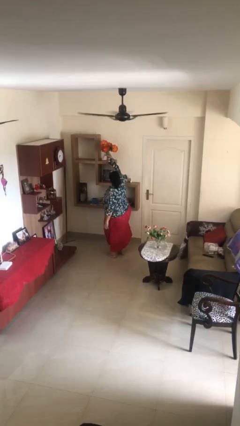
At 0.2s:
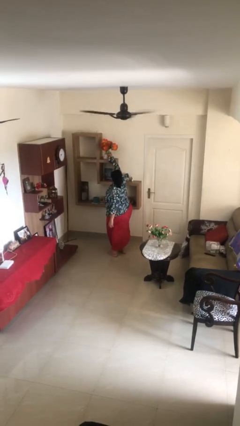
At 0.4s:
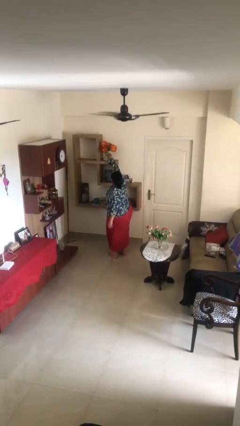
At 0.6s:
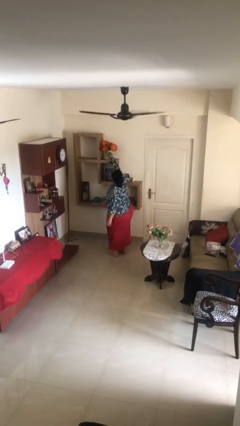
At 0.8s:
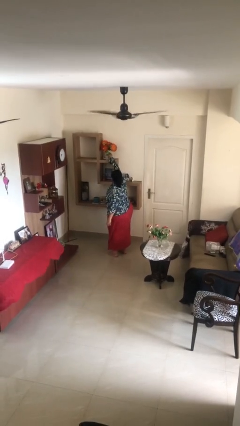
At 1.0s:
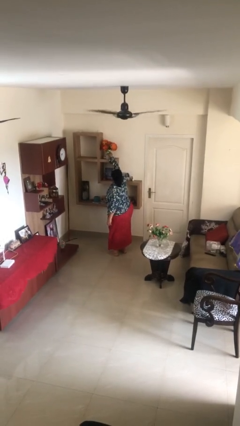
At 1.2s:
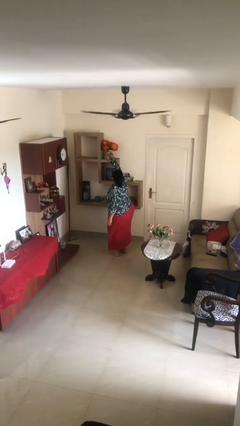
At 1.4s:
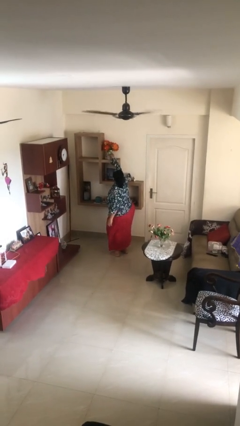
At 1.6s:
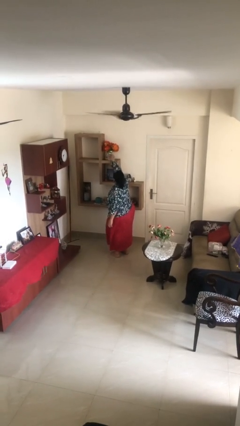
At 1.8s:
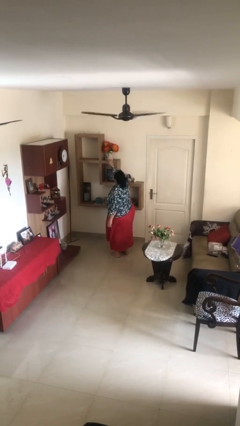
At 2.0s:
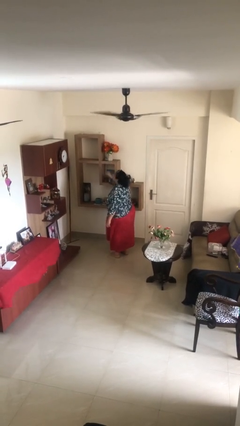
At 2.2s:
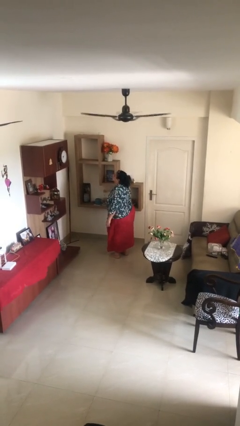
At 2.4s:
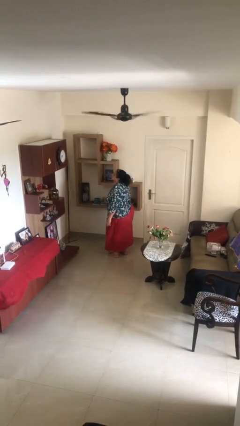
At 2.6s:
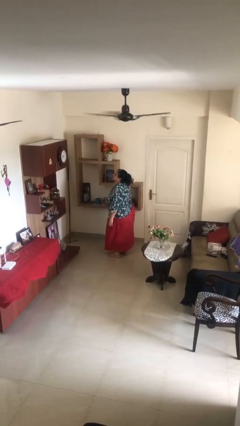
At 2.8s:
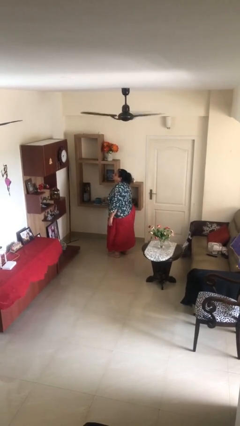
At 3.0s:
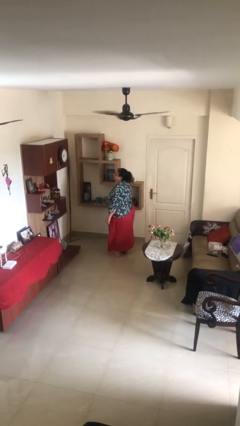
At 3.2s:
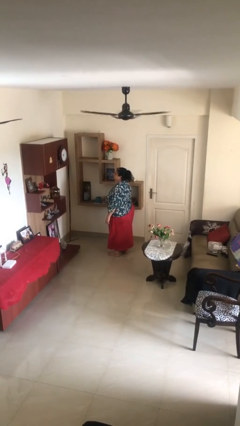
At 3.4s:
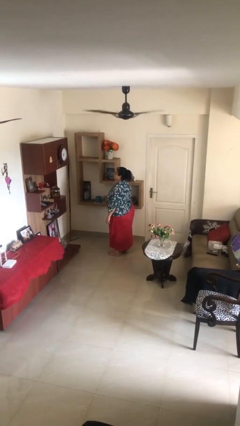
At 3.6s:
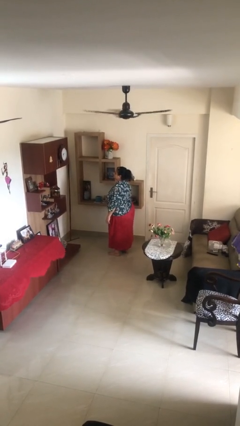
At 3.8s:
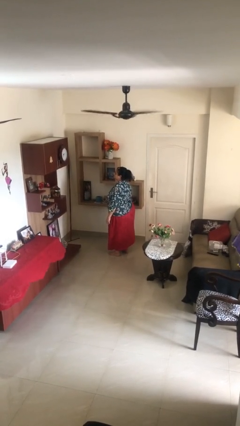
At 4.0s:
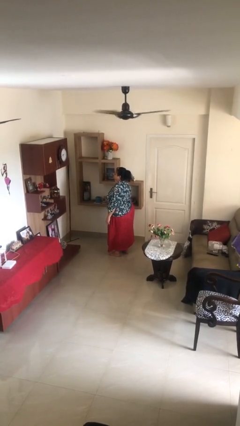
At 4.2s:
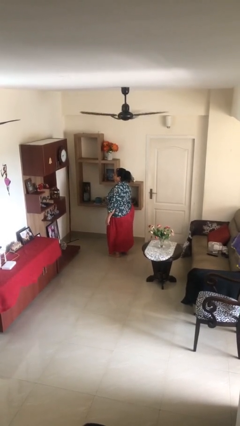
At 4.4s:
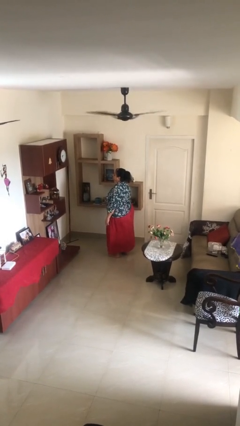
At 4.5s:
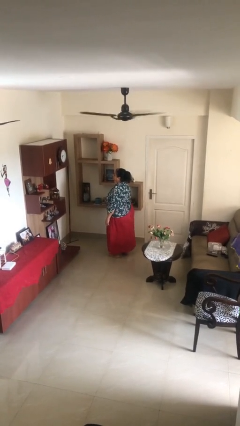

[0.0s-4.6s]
person puts down object on shelf

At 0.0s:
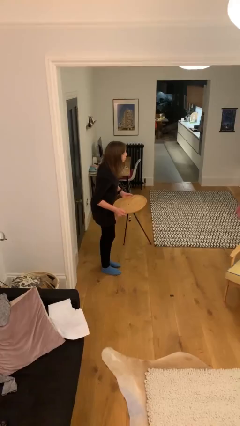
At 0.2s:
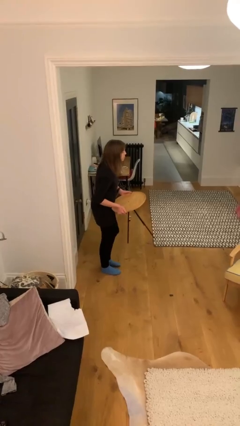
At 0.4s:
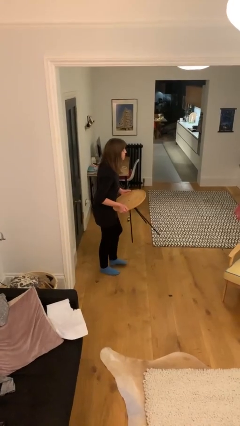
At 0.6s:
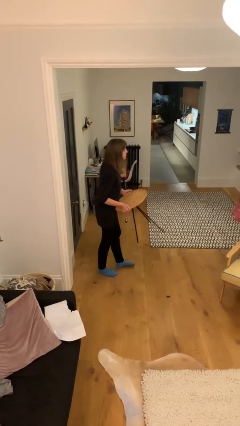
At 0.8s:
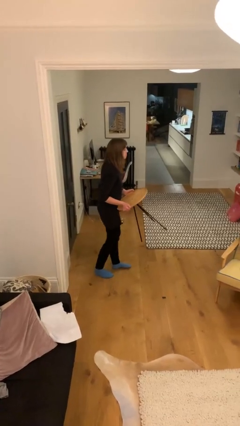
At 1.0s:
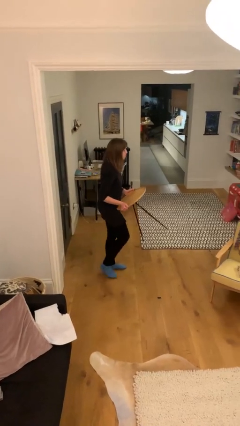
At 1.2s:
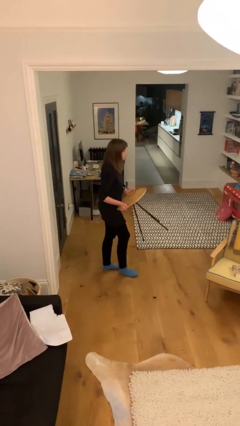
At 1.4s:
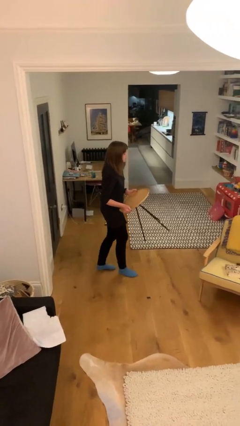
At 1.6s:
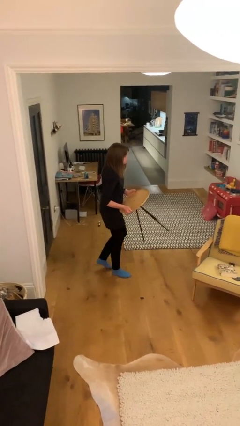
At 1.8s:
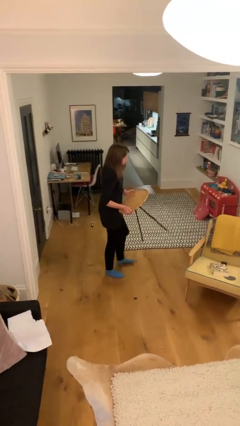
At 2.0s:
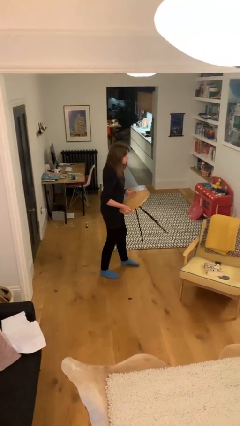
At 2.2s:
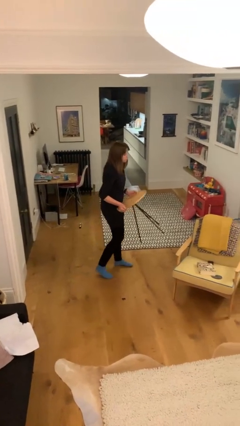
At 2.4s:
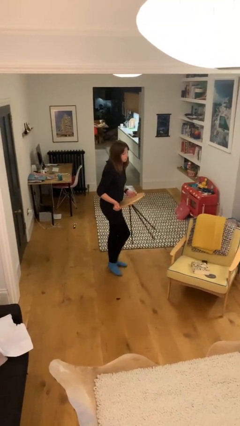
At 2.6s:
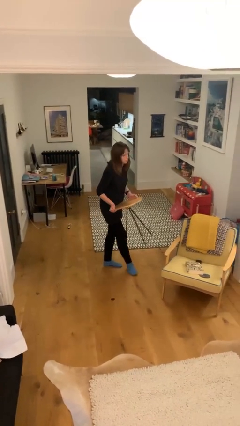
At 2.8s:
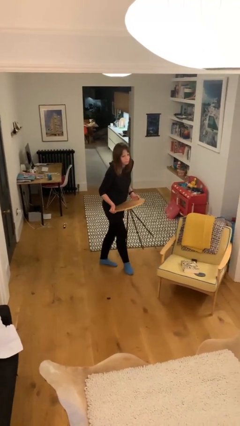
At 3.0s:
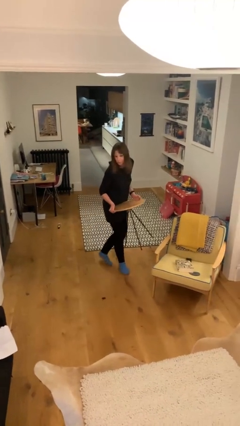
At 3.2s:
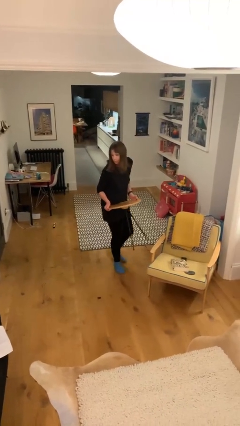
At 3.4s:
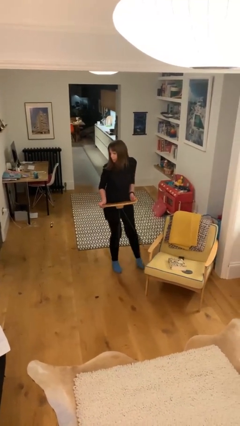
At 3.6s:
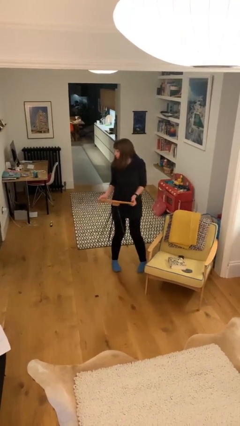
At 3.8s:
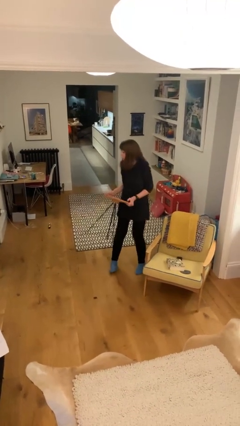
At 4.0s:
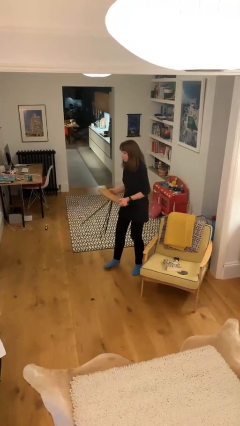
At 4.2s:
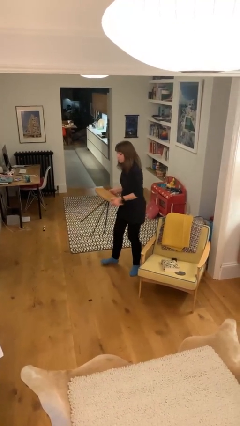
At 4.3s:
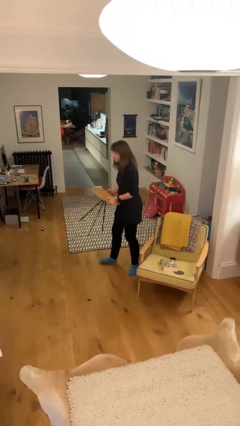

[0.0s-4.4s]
person carries heavy object

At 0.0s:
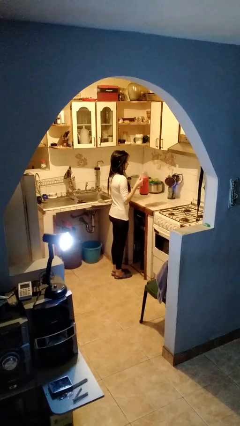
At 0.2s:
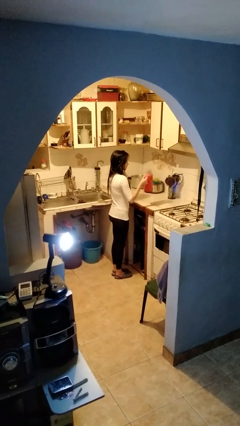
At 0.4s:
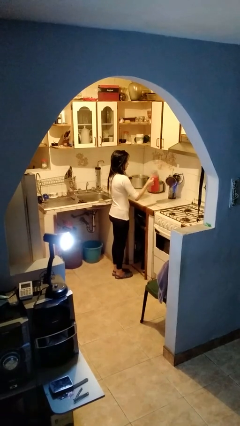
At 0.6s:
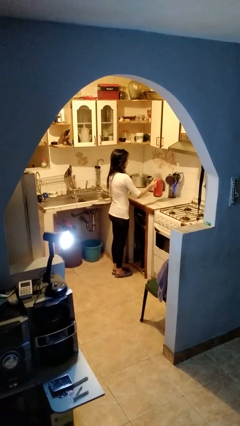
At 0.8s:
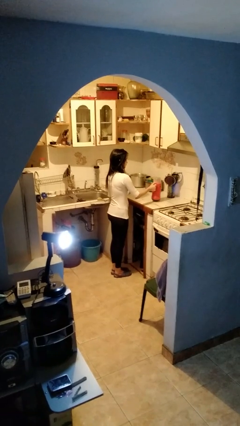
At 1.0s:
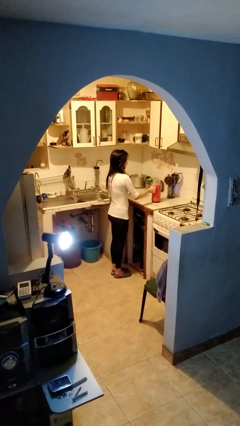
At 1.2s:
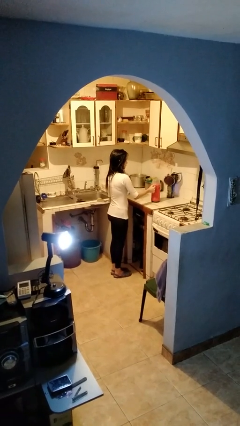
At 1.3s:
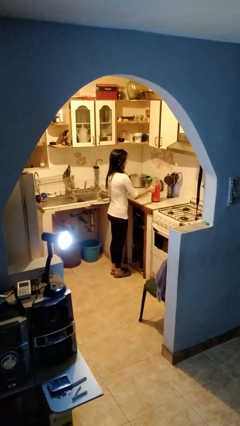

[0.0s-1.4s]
person puts down object on countertop

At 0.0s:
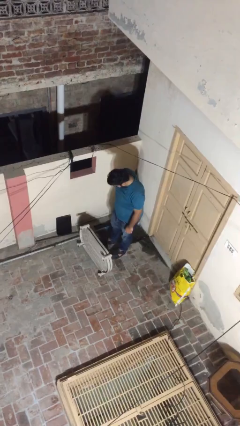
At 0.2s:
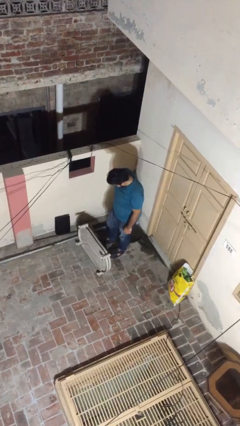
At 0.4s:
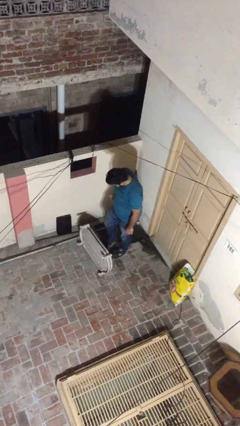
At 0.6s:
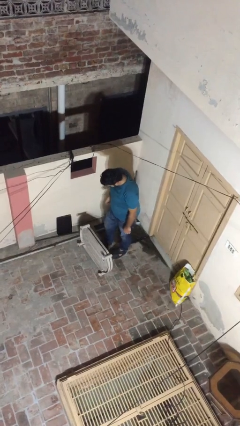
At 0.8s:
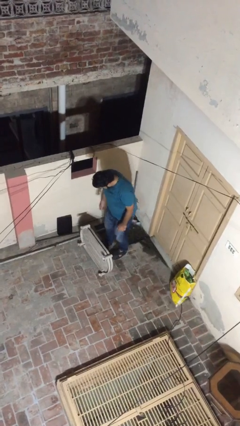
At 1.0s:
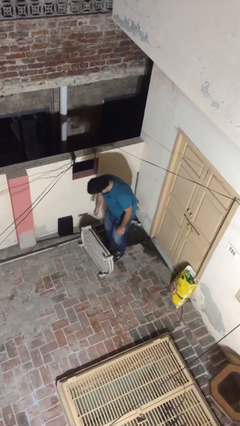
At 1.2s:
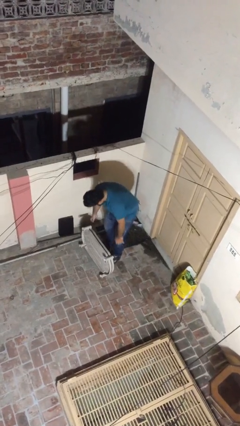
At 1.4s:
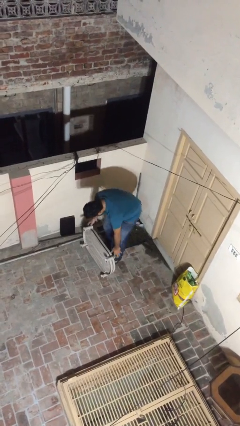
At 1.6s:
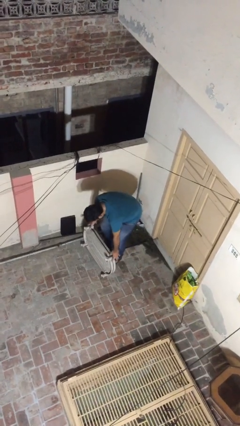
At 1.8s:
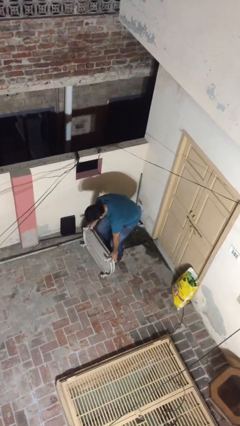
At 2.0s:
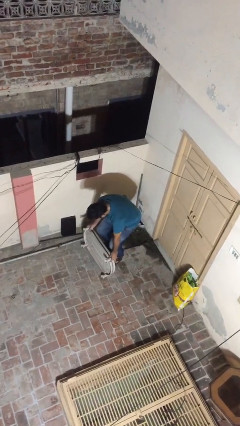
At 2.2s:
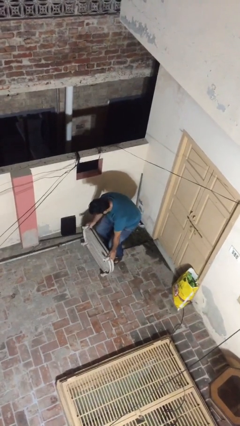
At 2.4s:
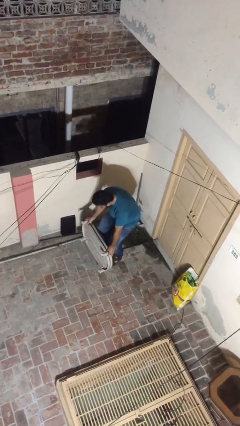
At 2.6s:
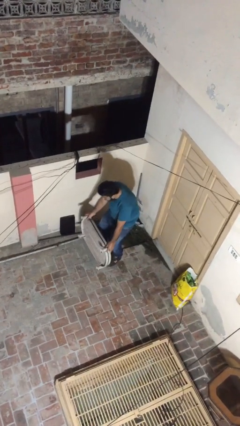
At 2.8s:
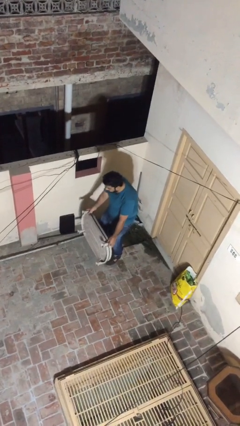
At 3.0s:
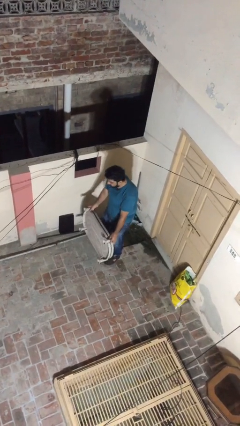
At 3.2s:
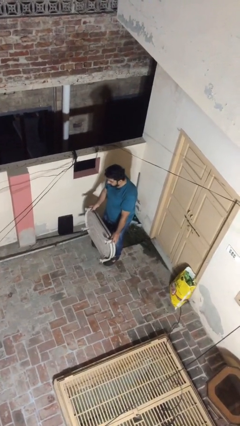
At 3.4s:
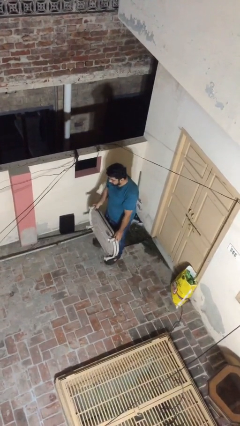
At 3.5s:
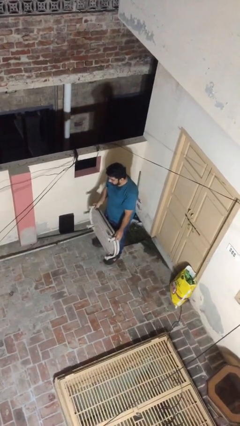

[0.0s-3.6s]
person picks up object from floor

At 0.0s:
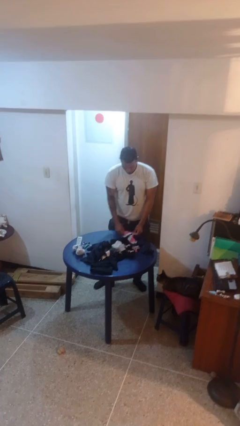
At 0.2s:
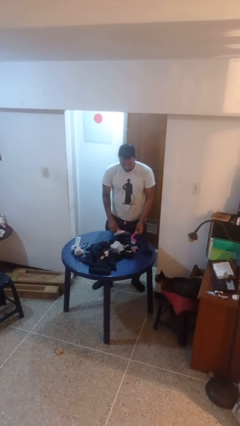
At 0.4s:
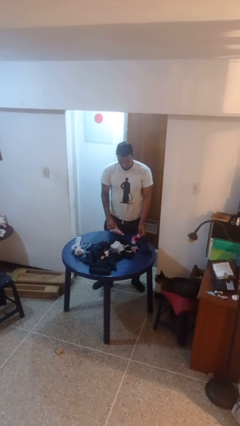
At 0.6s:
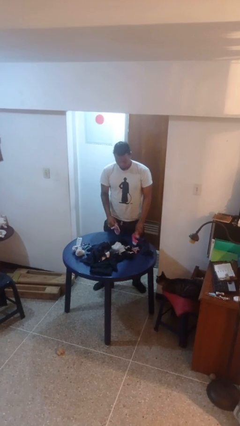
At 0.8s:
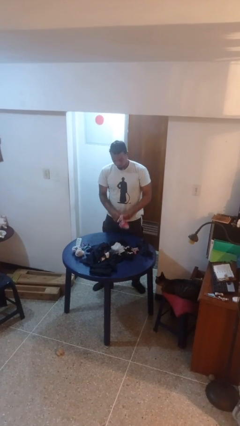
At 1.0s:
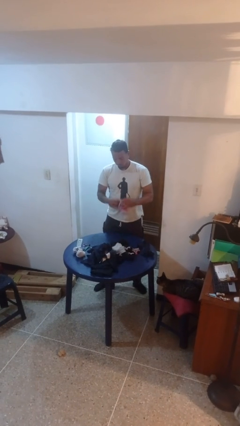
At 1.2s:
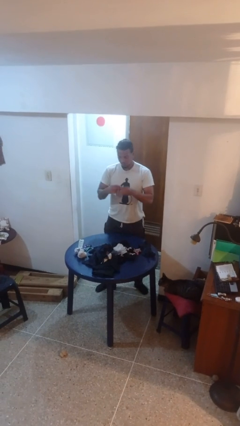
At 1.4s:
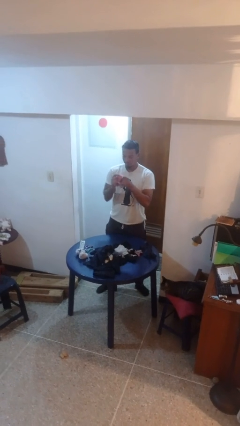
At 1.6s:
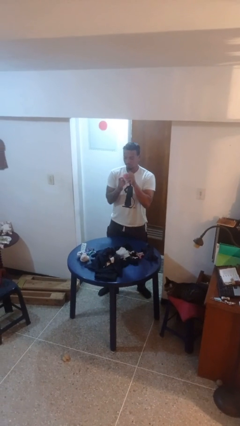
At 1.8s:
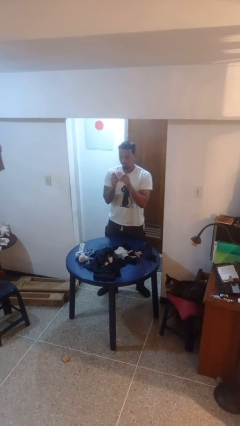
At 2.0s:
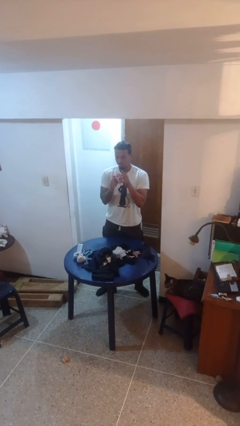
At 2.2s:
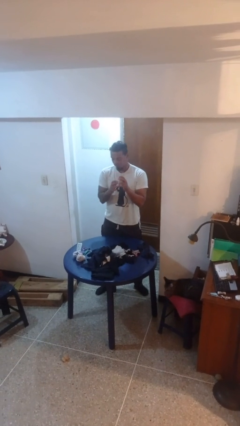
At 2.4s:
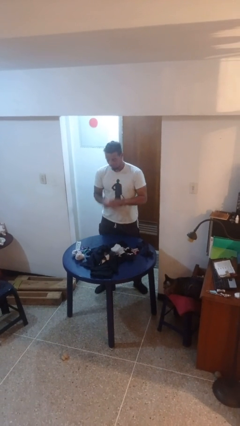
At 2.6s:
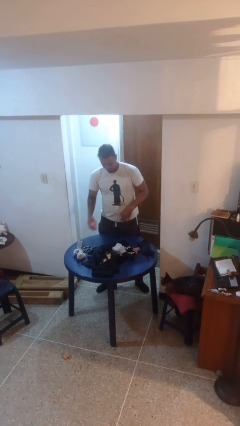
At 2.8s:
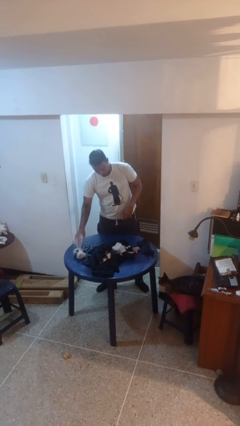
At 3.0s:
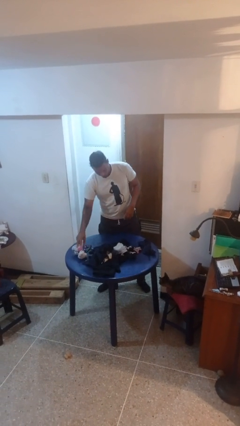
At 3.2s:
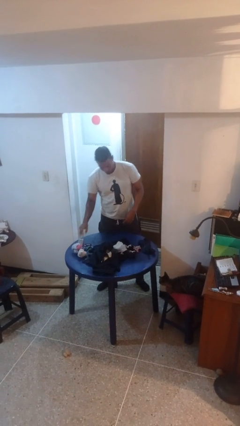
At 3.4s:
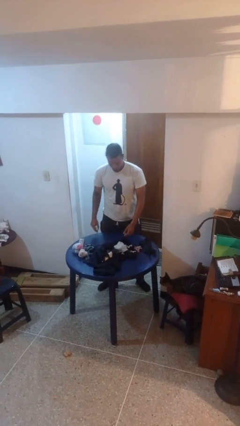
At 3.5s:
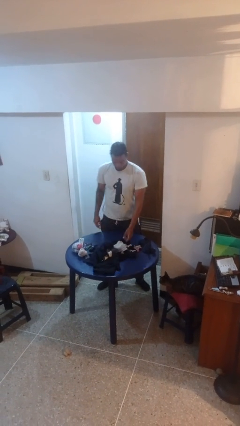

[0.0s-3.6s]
person folds socks
